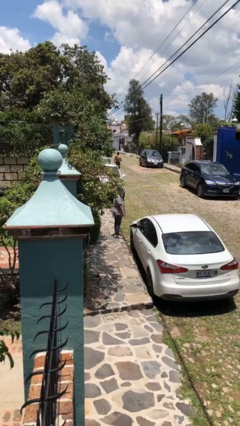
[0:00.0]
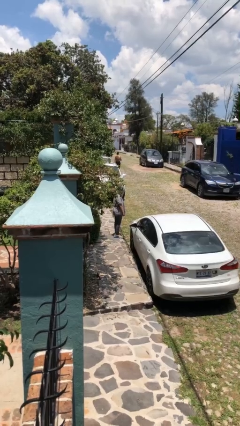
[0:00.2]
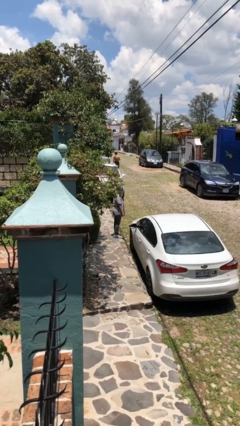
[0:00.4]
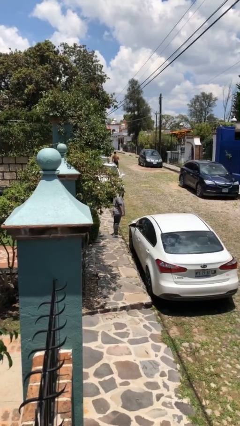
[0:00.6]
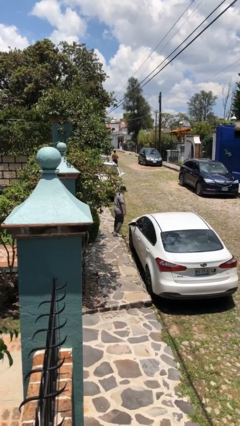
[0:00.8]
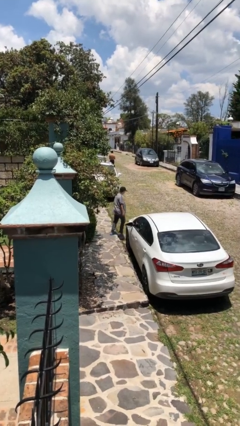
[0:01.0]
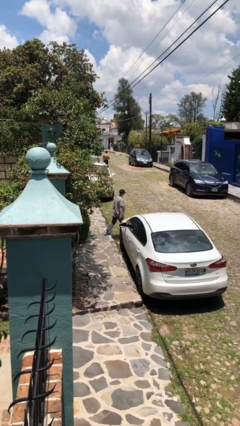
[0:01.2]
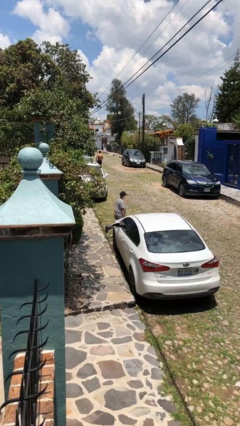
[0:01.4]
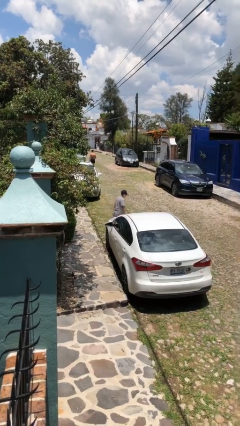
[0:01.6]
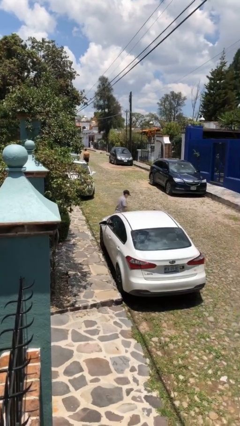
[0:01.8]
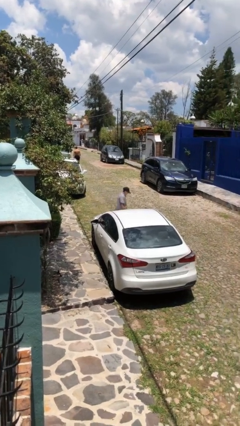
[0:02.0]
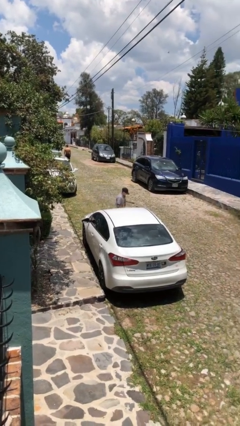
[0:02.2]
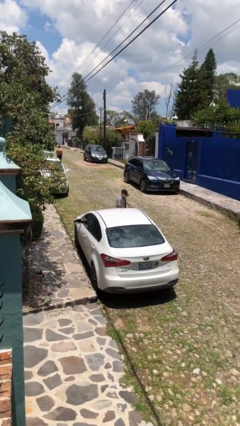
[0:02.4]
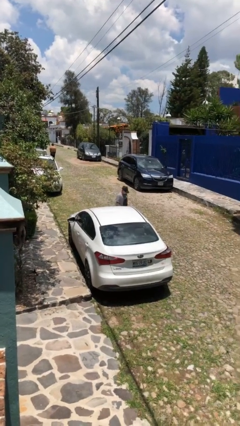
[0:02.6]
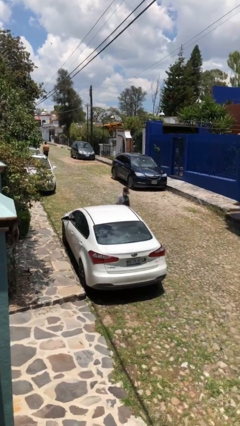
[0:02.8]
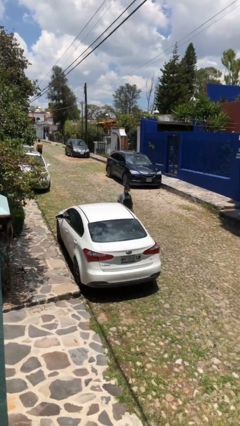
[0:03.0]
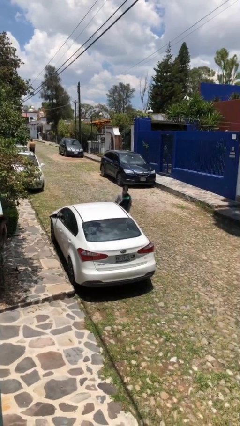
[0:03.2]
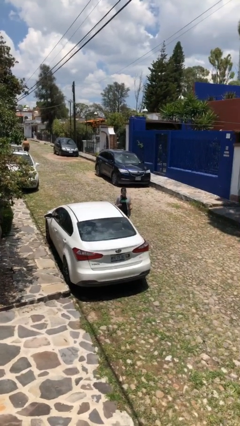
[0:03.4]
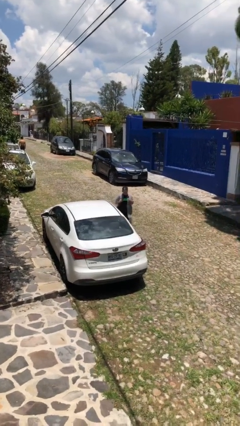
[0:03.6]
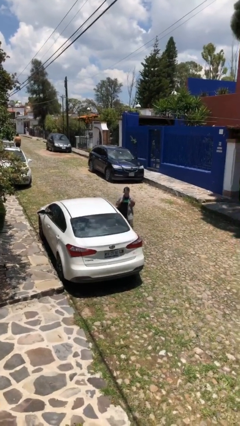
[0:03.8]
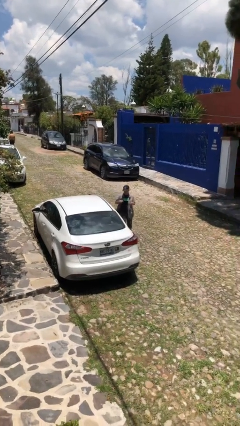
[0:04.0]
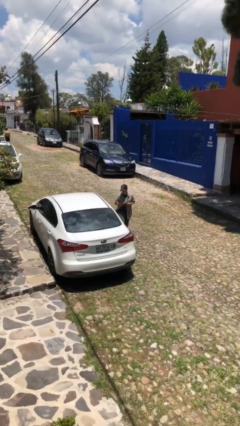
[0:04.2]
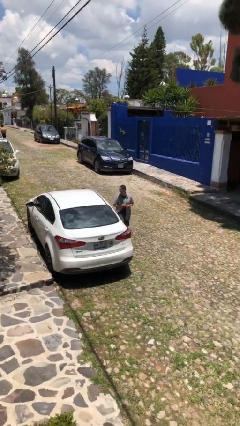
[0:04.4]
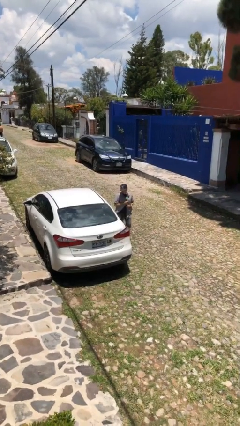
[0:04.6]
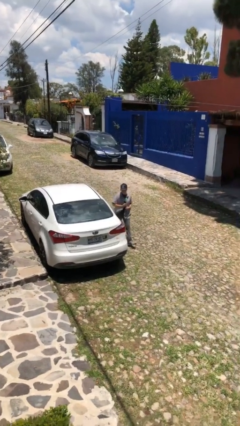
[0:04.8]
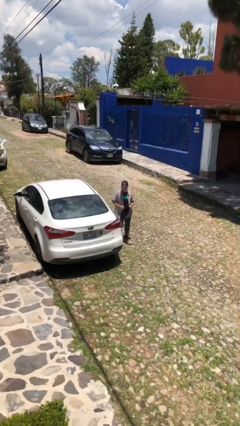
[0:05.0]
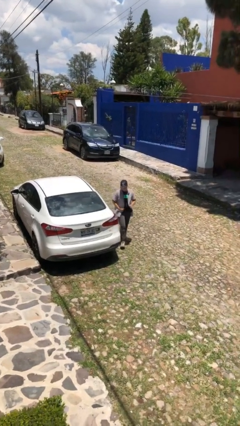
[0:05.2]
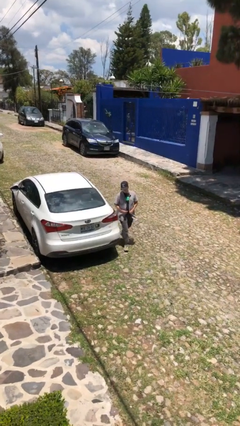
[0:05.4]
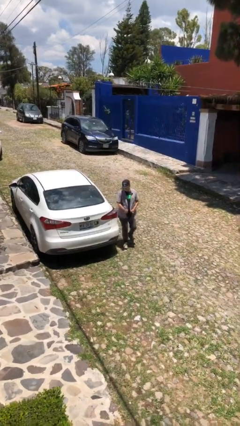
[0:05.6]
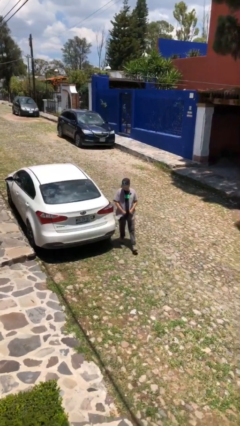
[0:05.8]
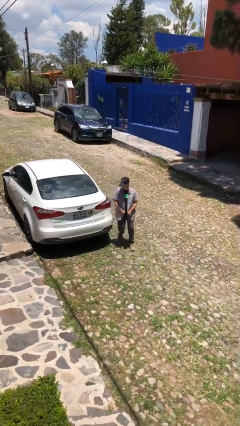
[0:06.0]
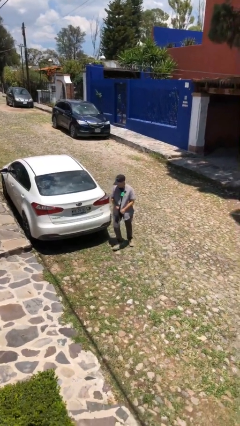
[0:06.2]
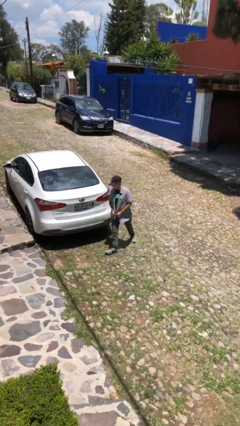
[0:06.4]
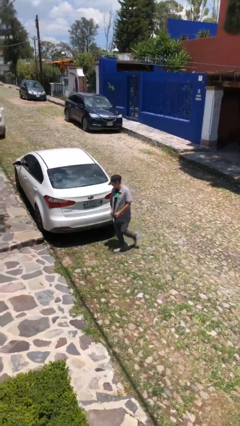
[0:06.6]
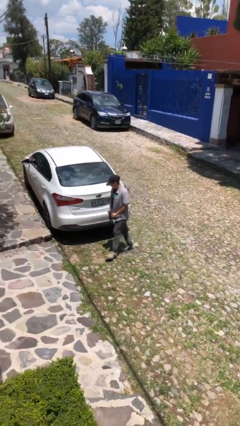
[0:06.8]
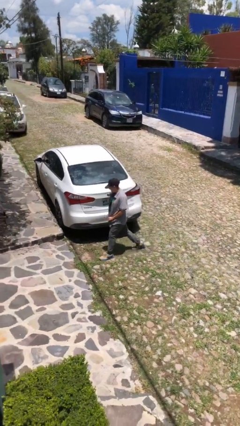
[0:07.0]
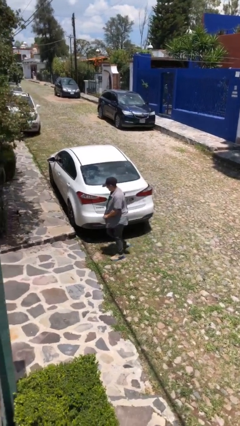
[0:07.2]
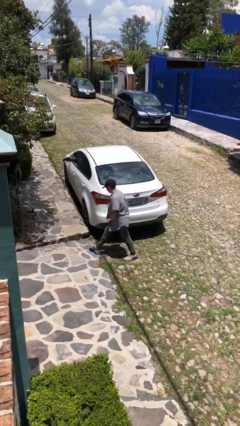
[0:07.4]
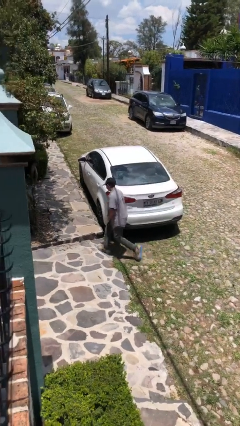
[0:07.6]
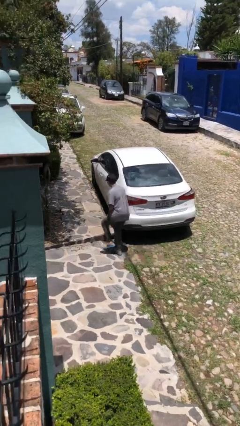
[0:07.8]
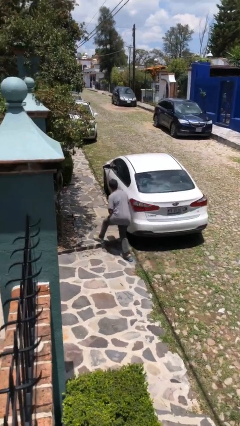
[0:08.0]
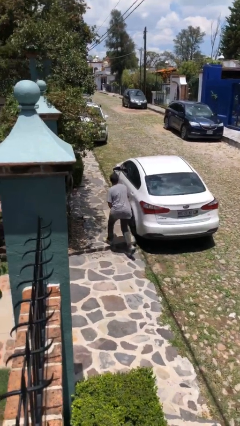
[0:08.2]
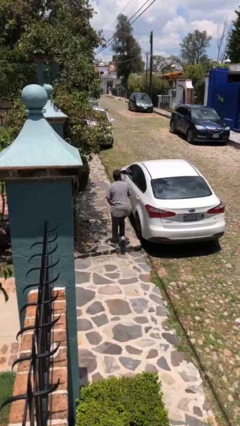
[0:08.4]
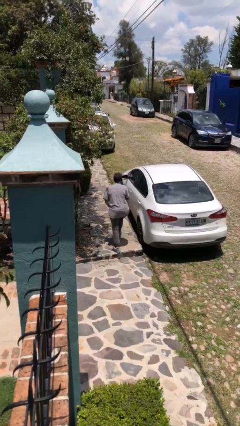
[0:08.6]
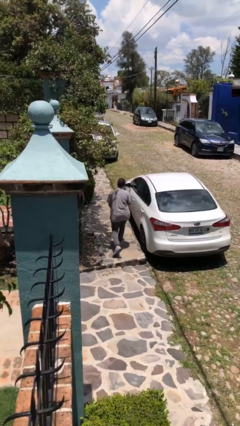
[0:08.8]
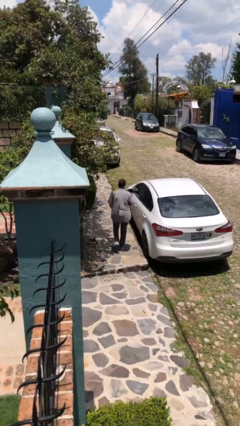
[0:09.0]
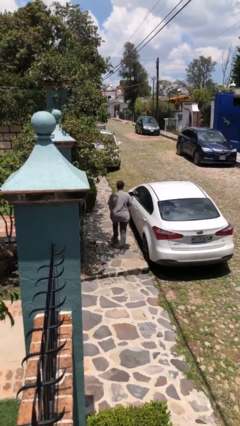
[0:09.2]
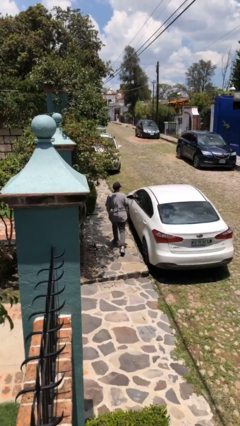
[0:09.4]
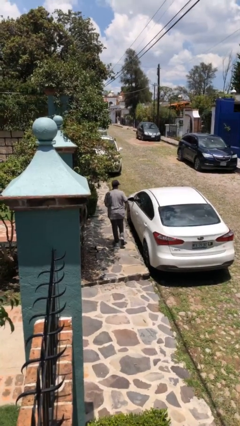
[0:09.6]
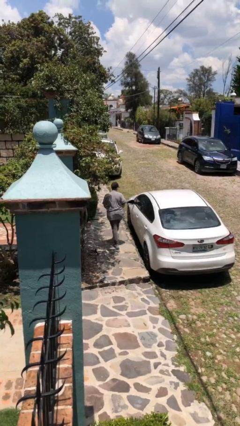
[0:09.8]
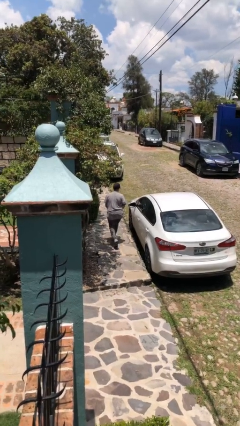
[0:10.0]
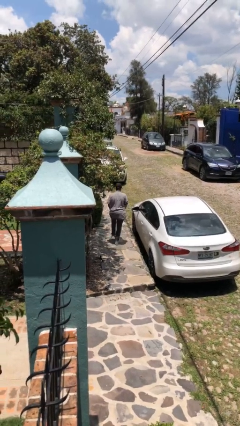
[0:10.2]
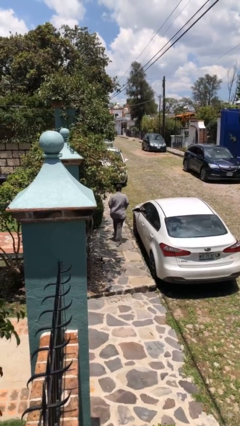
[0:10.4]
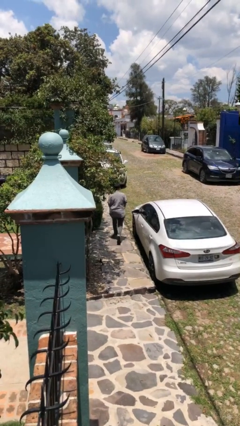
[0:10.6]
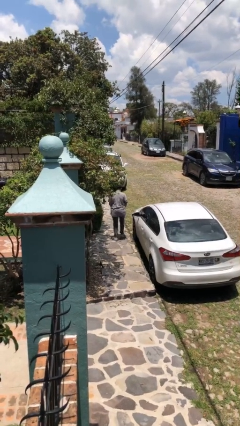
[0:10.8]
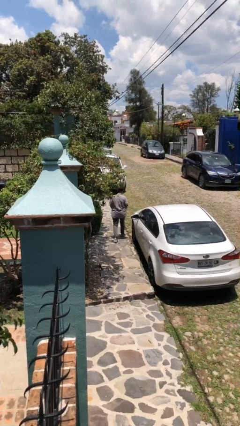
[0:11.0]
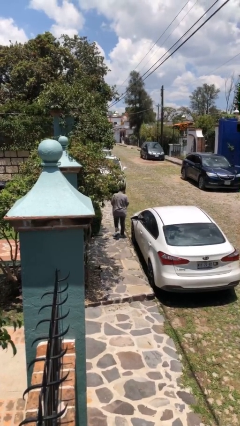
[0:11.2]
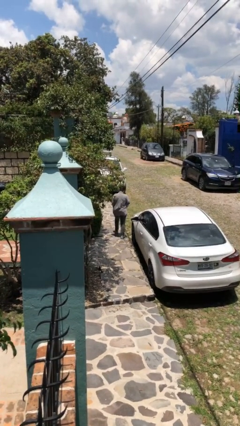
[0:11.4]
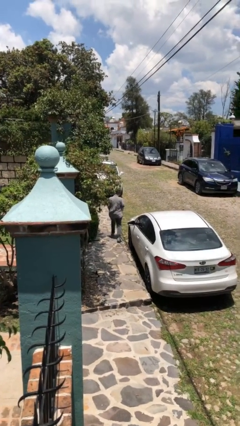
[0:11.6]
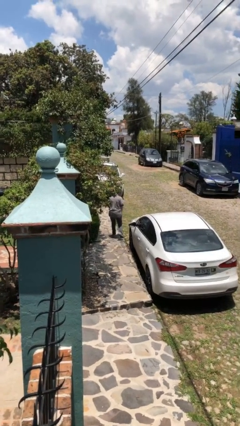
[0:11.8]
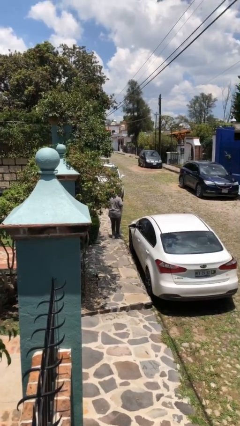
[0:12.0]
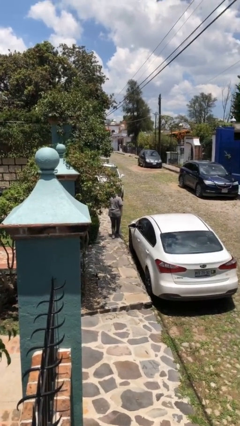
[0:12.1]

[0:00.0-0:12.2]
person walks around car

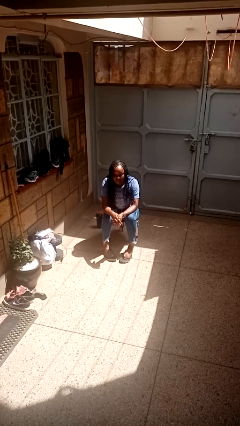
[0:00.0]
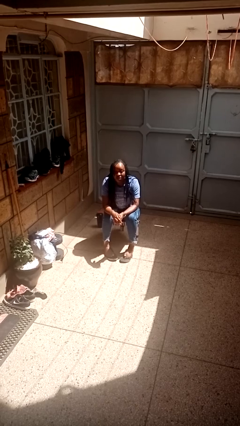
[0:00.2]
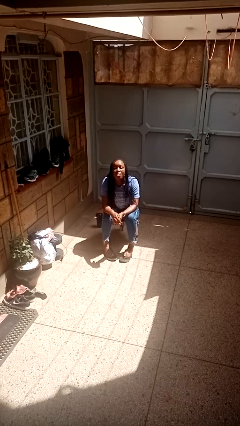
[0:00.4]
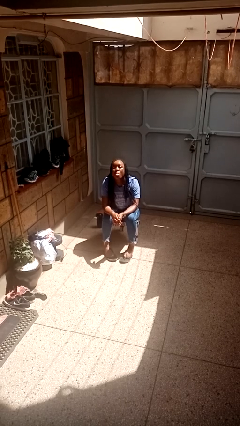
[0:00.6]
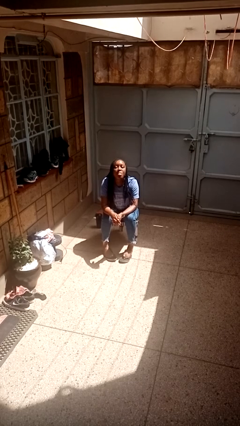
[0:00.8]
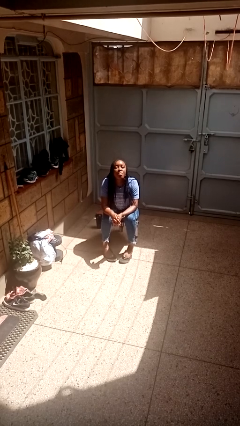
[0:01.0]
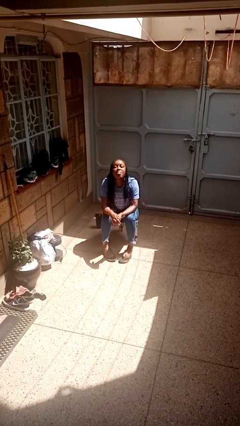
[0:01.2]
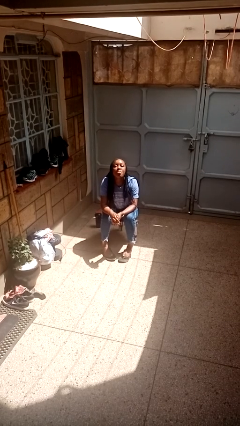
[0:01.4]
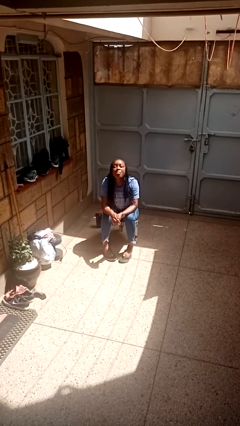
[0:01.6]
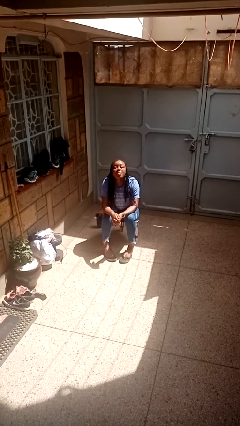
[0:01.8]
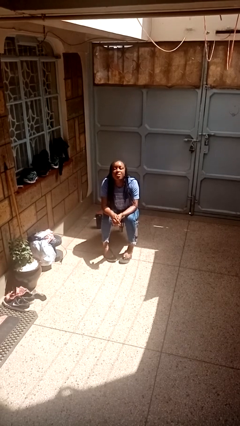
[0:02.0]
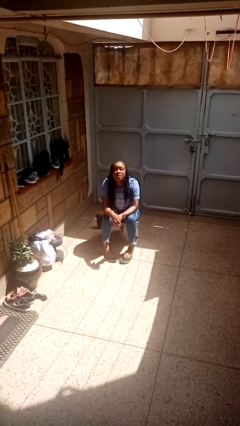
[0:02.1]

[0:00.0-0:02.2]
person sticks out tongue

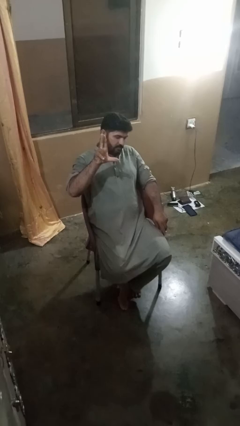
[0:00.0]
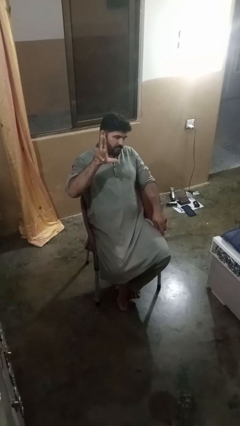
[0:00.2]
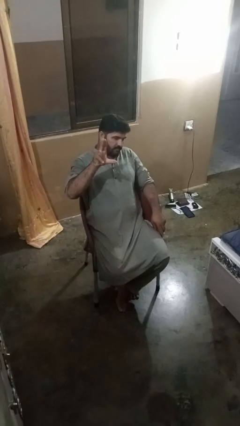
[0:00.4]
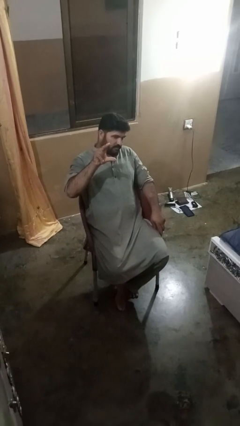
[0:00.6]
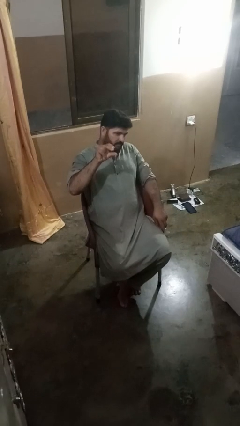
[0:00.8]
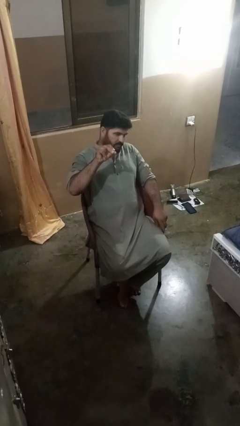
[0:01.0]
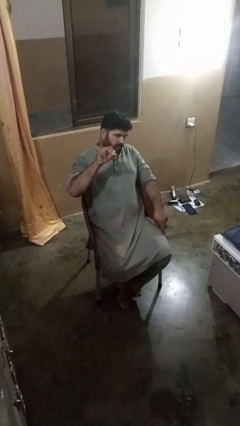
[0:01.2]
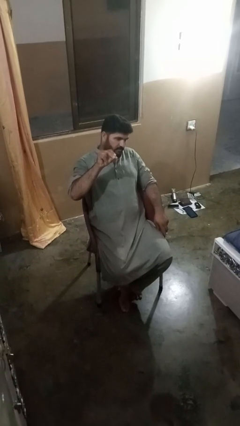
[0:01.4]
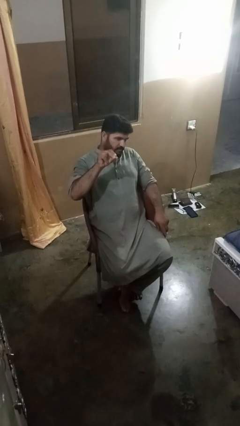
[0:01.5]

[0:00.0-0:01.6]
person gestures zoom in

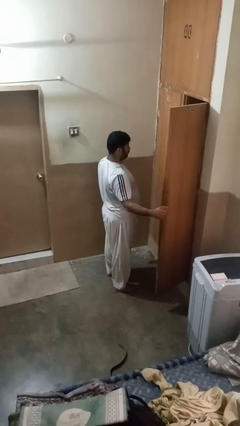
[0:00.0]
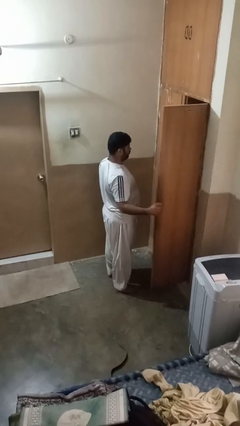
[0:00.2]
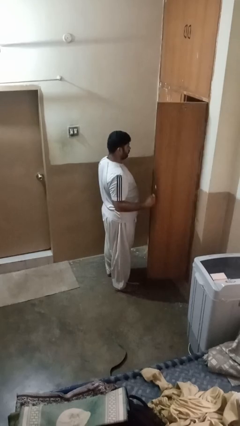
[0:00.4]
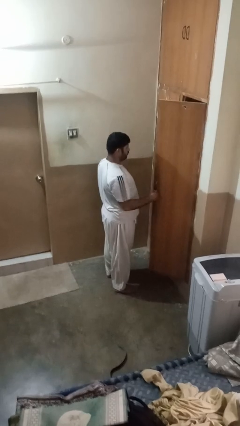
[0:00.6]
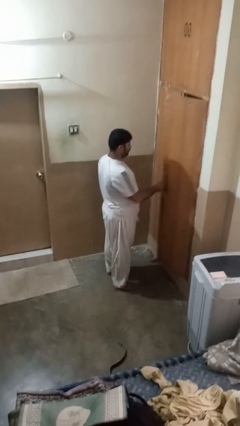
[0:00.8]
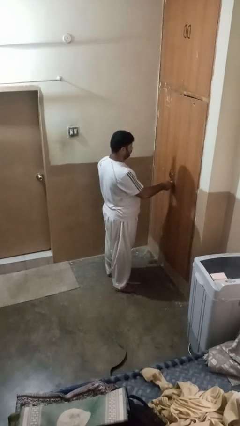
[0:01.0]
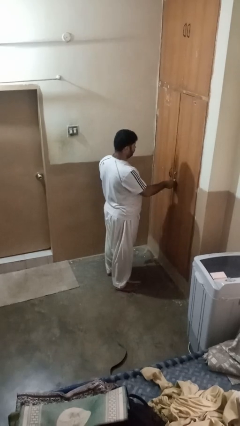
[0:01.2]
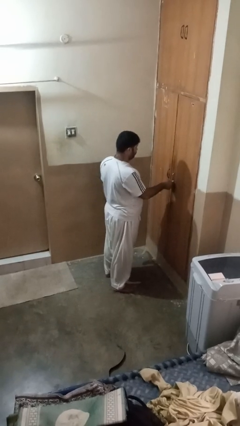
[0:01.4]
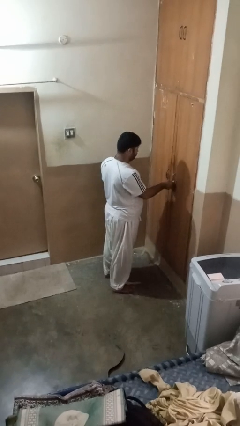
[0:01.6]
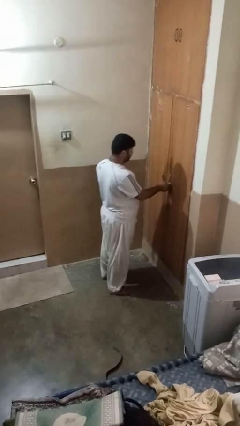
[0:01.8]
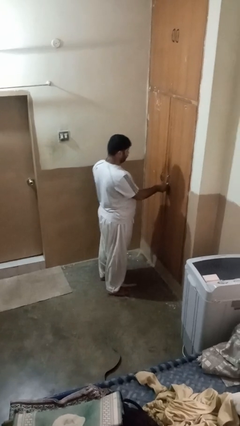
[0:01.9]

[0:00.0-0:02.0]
person closes closet door
